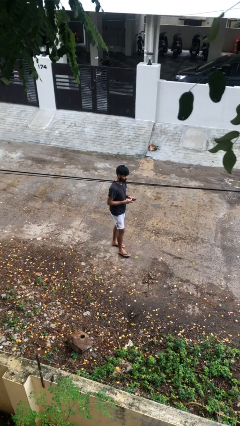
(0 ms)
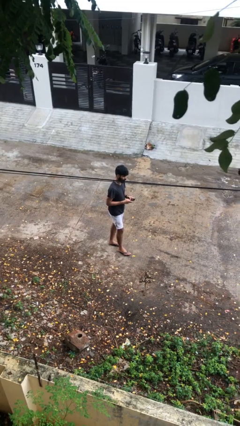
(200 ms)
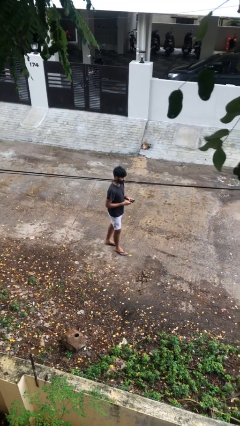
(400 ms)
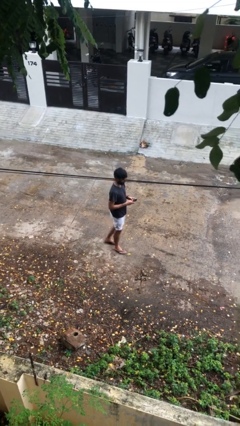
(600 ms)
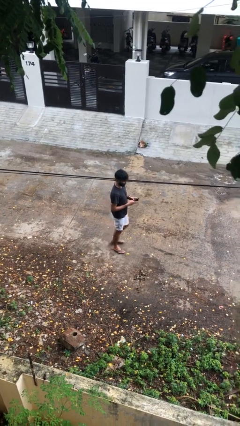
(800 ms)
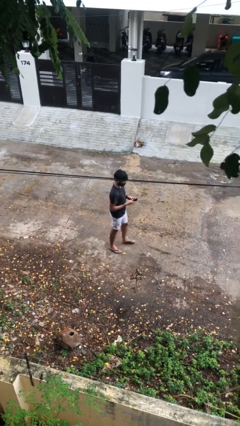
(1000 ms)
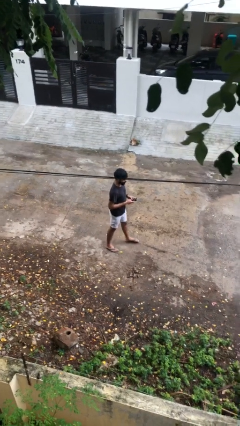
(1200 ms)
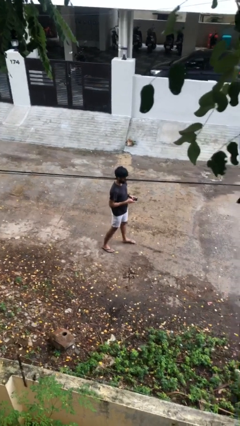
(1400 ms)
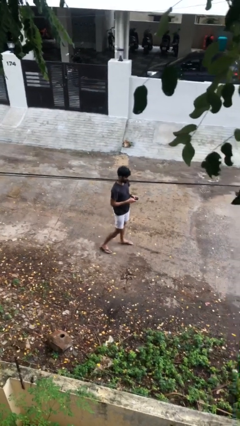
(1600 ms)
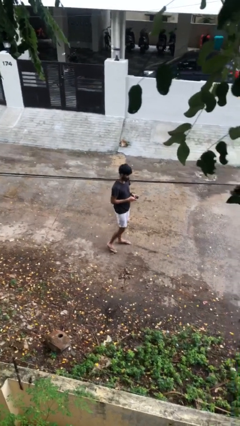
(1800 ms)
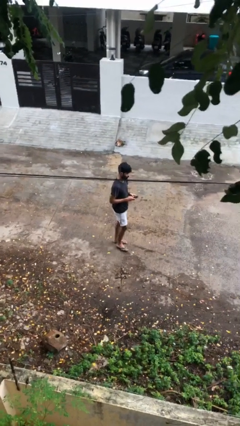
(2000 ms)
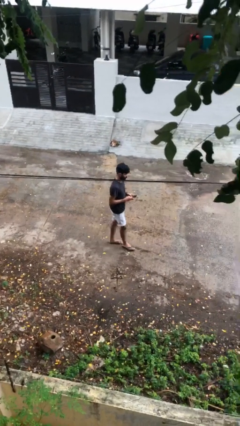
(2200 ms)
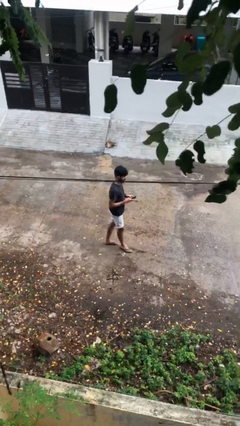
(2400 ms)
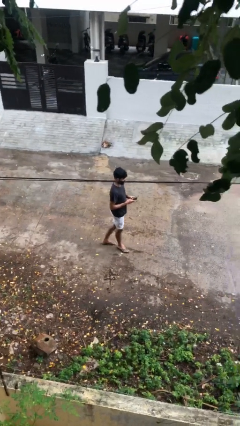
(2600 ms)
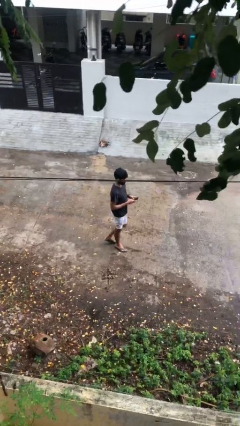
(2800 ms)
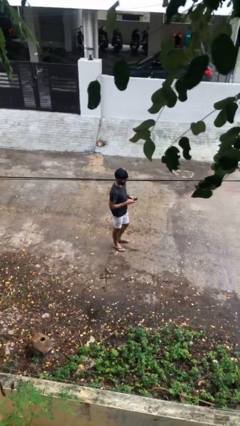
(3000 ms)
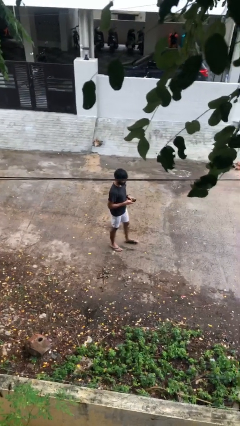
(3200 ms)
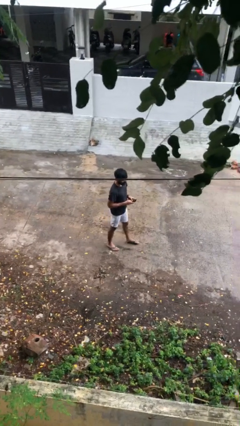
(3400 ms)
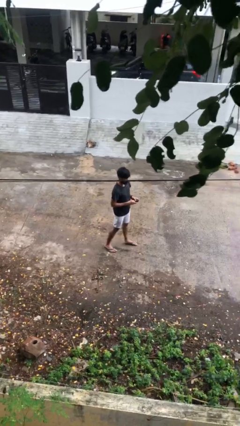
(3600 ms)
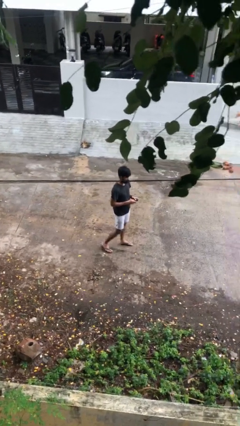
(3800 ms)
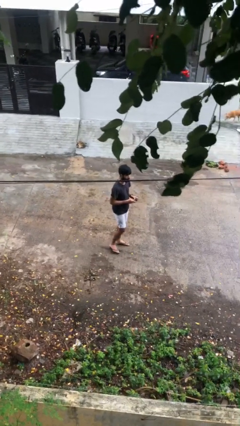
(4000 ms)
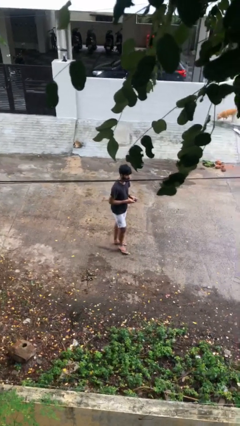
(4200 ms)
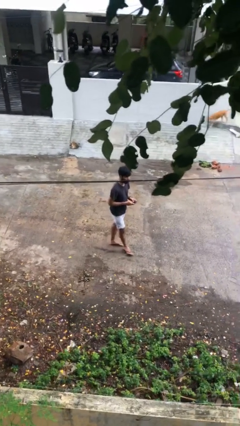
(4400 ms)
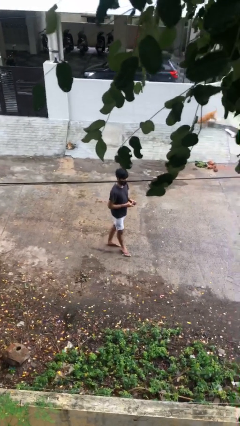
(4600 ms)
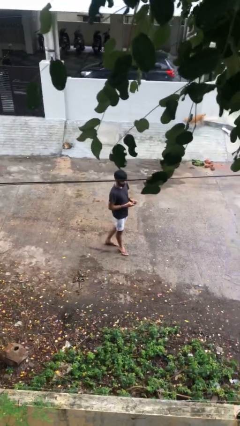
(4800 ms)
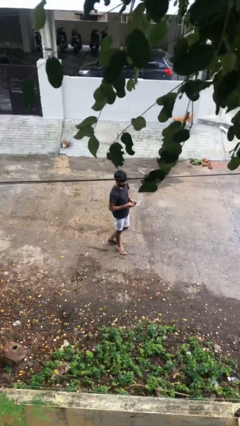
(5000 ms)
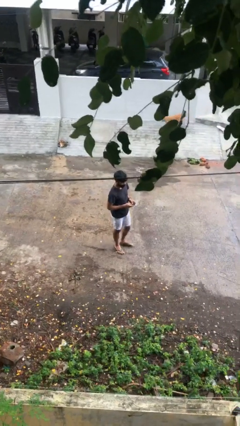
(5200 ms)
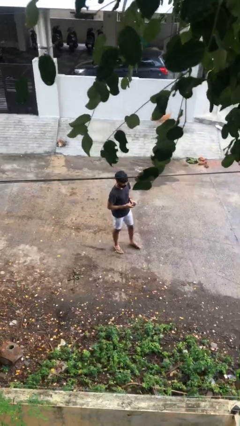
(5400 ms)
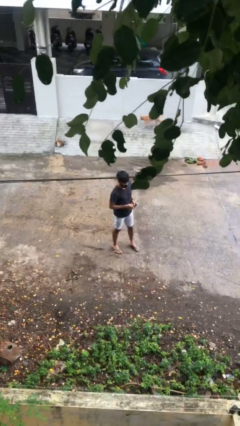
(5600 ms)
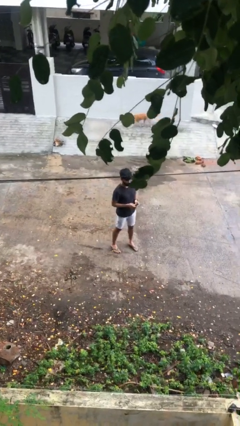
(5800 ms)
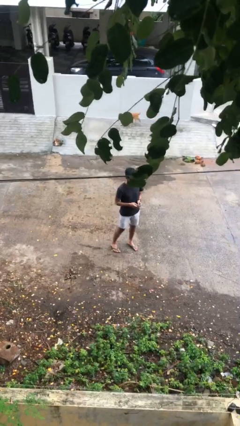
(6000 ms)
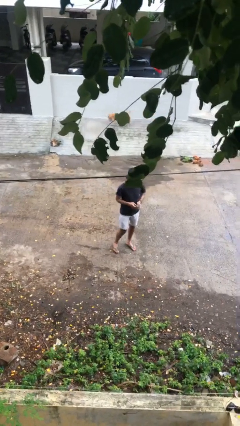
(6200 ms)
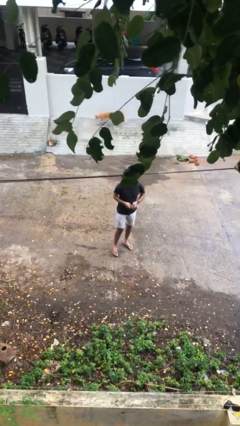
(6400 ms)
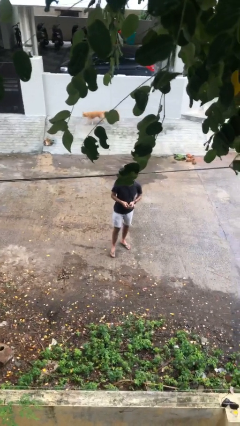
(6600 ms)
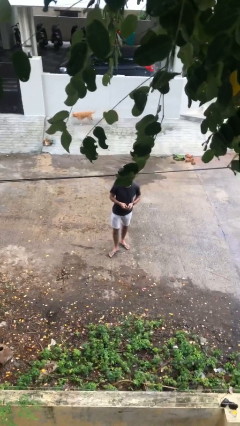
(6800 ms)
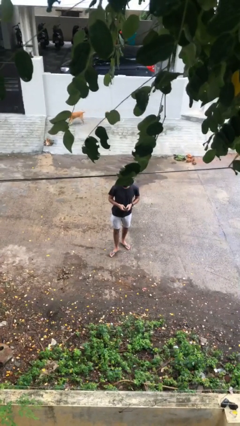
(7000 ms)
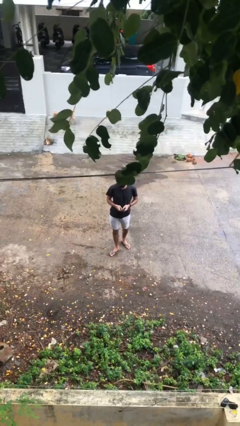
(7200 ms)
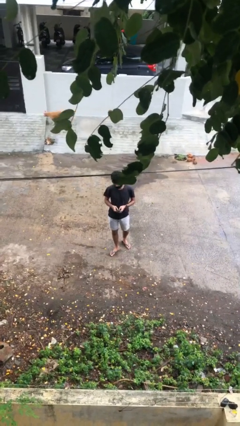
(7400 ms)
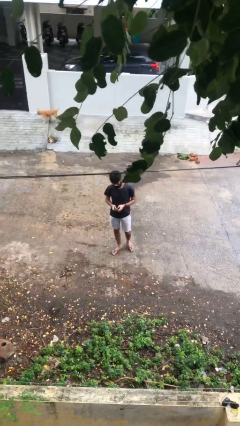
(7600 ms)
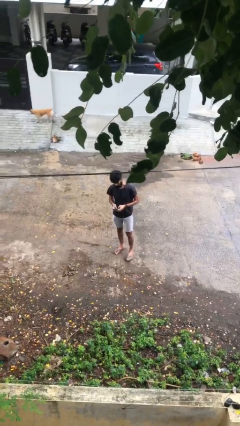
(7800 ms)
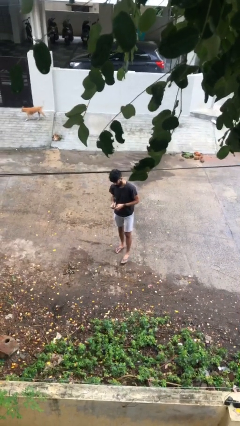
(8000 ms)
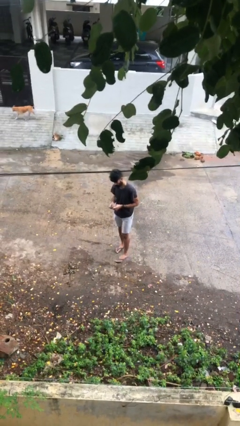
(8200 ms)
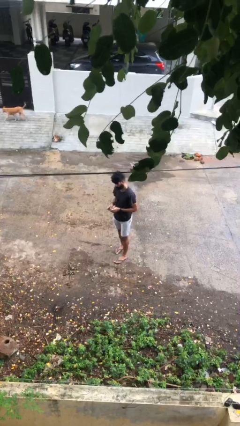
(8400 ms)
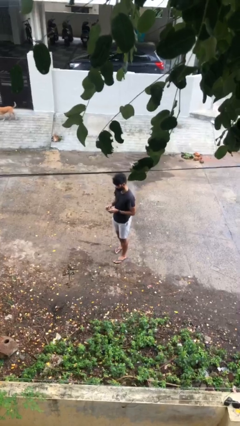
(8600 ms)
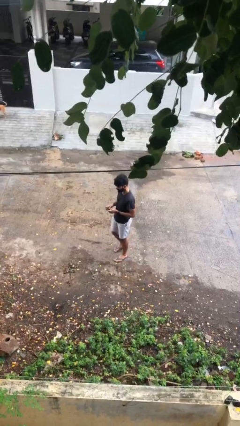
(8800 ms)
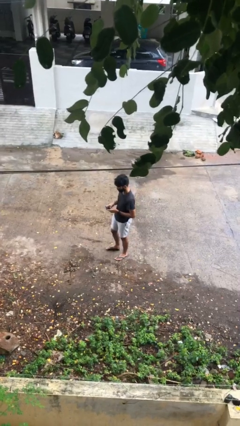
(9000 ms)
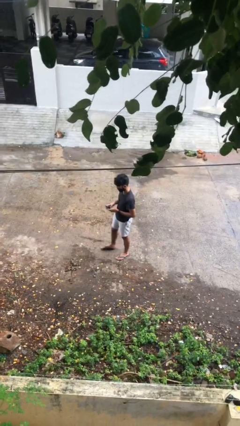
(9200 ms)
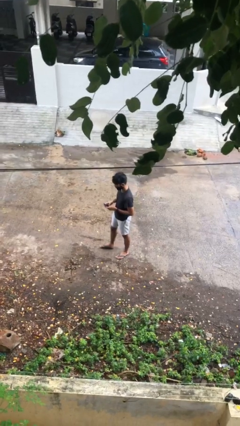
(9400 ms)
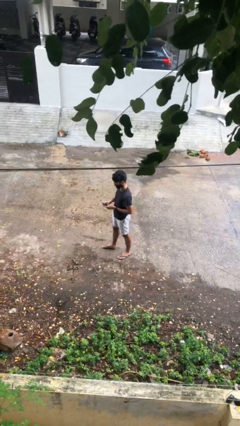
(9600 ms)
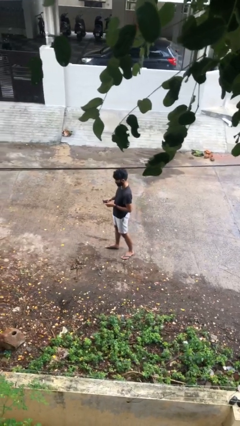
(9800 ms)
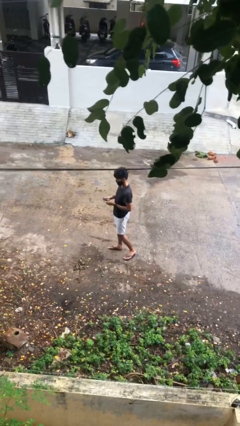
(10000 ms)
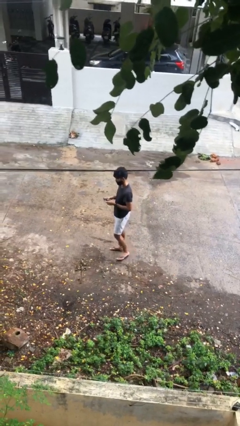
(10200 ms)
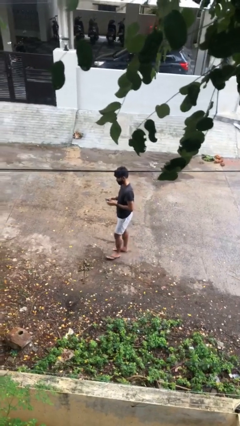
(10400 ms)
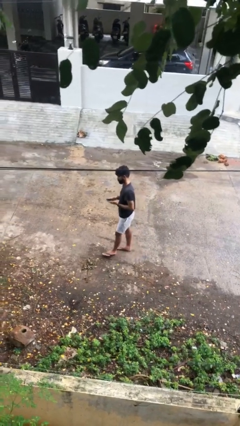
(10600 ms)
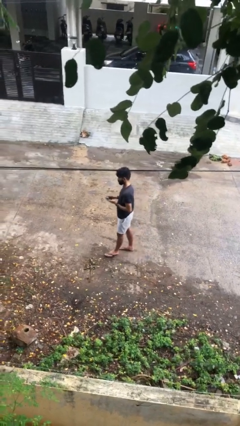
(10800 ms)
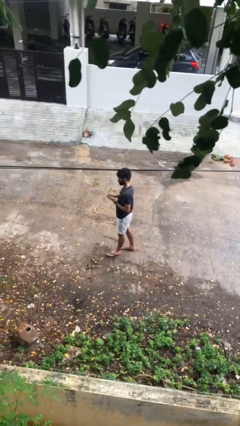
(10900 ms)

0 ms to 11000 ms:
person texts on phone

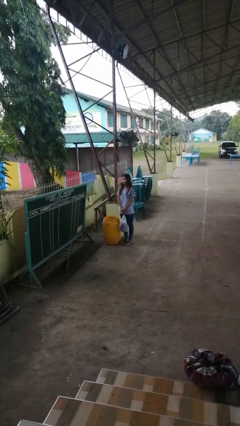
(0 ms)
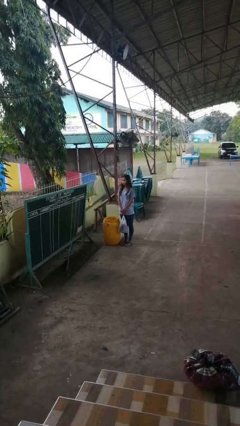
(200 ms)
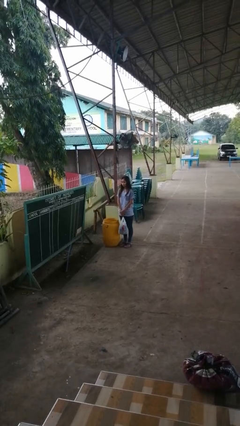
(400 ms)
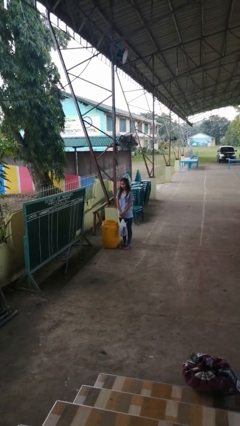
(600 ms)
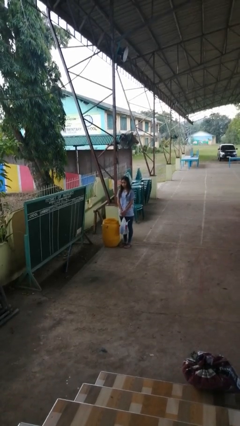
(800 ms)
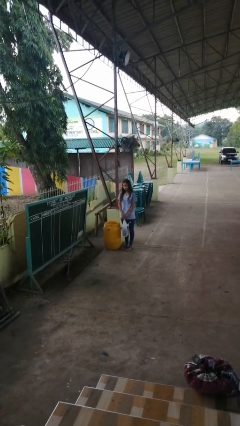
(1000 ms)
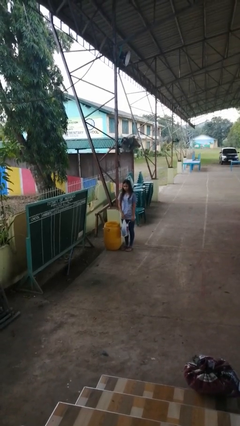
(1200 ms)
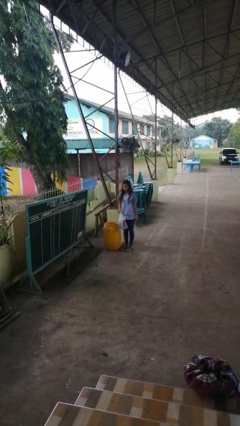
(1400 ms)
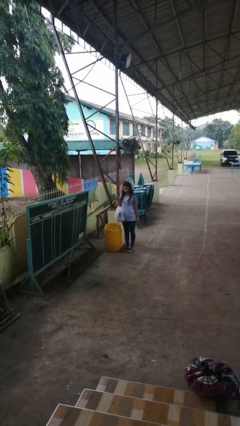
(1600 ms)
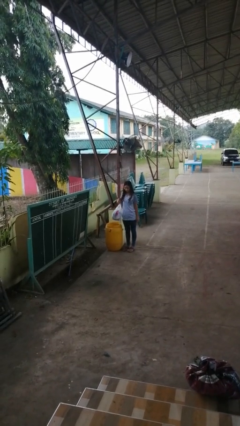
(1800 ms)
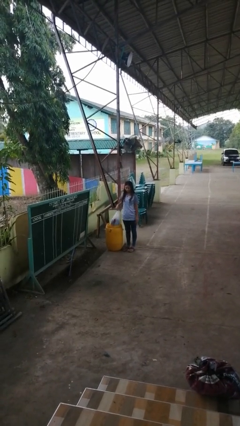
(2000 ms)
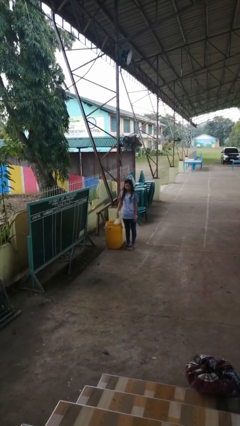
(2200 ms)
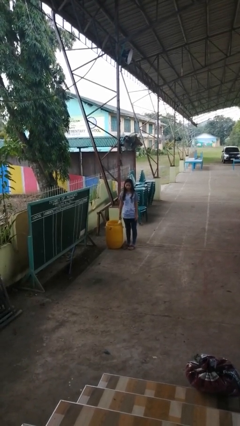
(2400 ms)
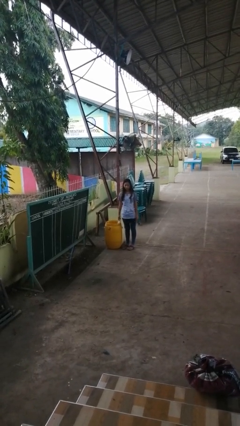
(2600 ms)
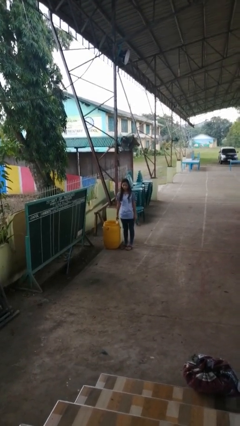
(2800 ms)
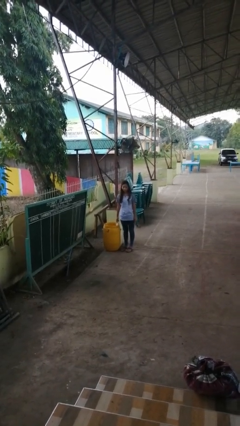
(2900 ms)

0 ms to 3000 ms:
person inserts trashbag into trashcan

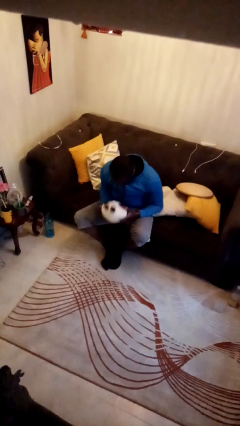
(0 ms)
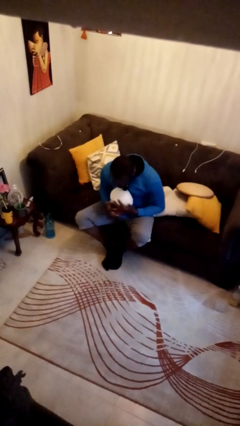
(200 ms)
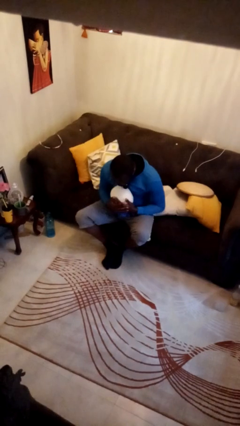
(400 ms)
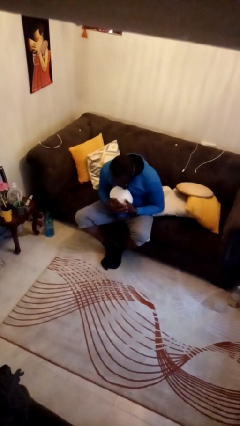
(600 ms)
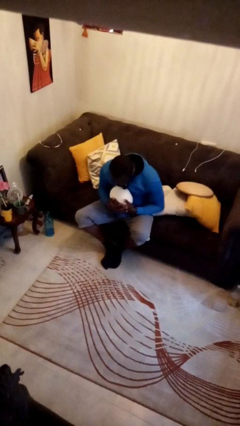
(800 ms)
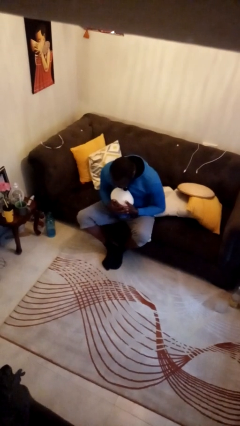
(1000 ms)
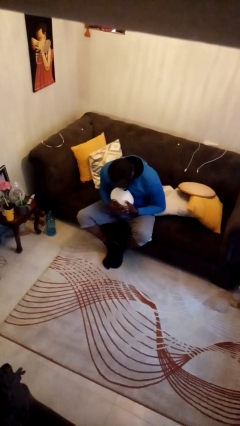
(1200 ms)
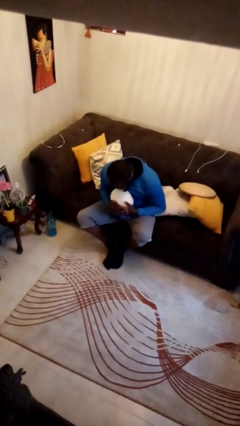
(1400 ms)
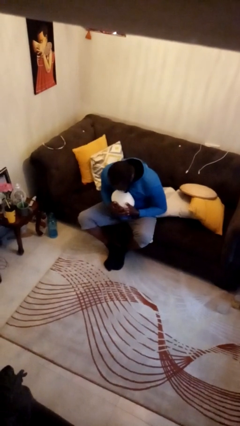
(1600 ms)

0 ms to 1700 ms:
person hugs stuffed animal

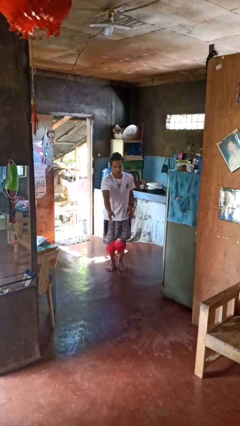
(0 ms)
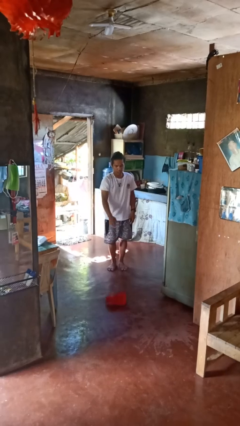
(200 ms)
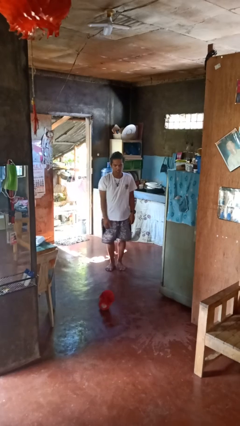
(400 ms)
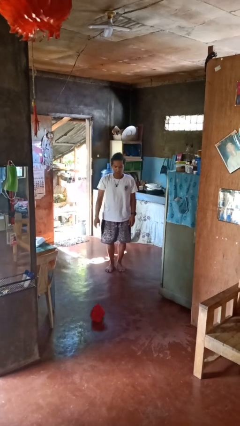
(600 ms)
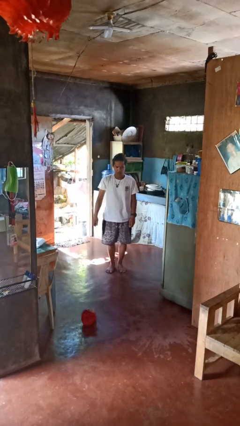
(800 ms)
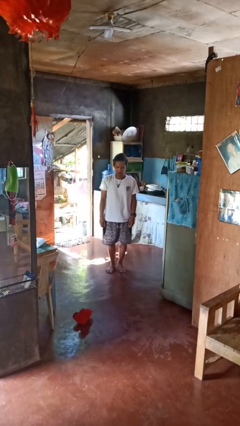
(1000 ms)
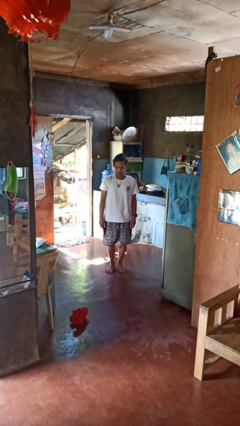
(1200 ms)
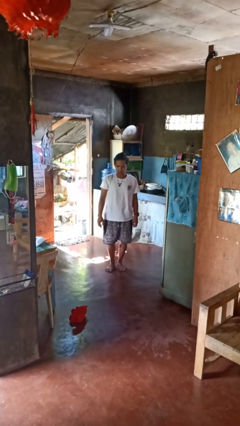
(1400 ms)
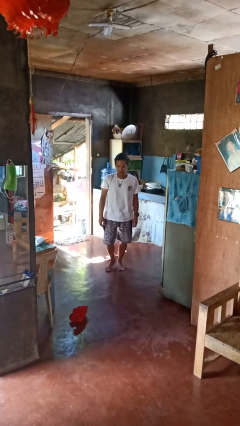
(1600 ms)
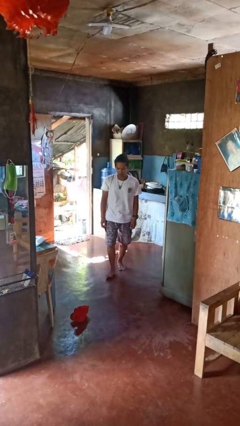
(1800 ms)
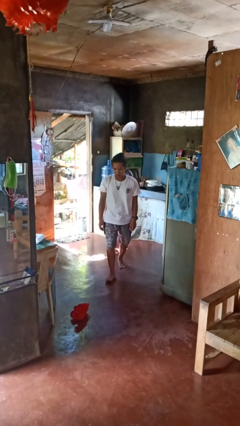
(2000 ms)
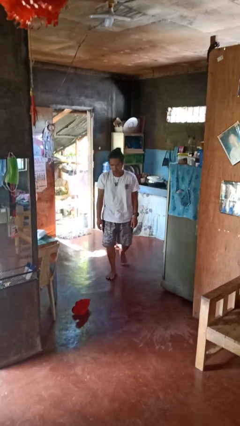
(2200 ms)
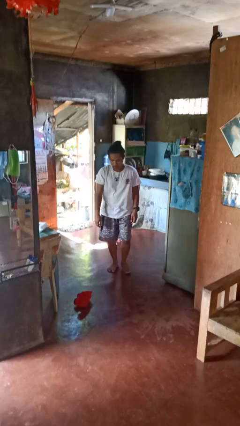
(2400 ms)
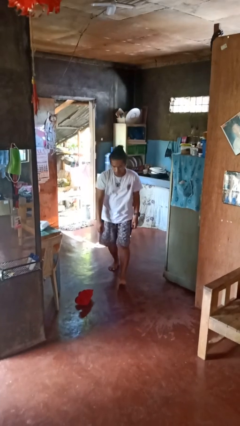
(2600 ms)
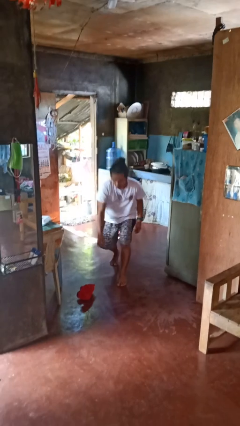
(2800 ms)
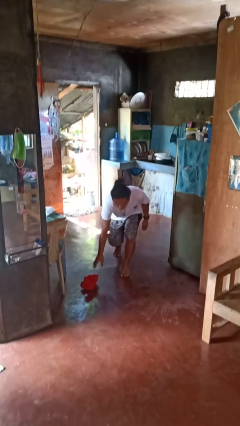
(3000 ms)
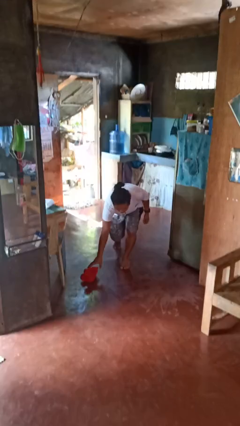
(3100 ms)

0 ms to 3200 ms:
person throws object to ground
